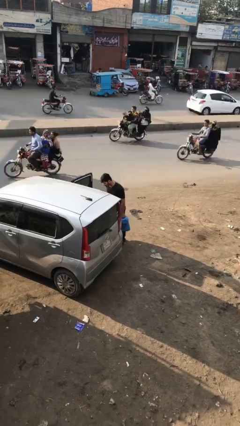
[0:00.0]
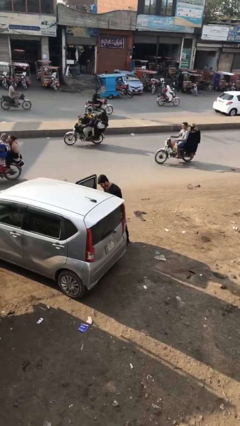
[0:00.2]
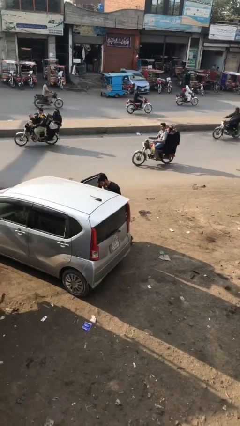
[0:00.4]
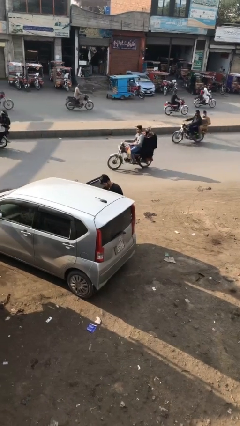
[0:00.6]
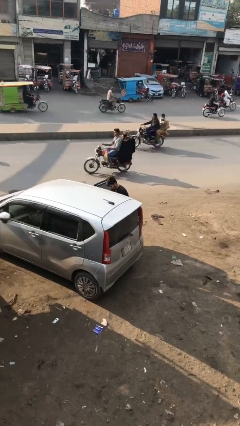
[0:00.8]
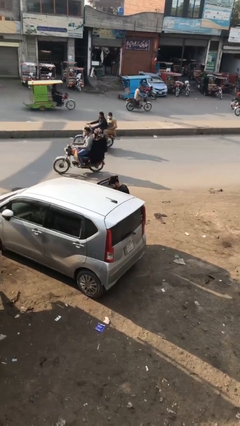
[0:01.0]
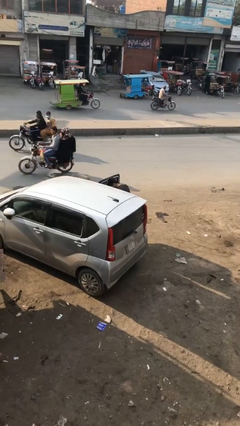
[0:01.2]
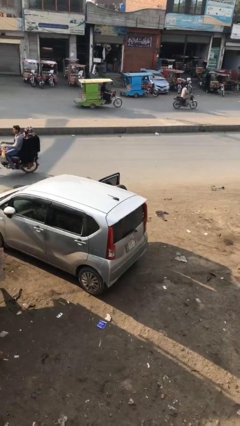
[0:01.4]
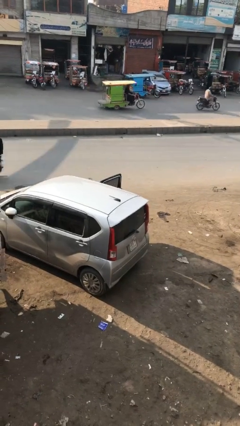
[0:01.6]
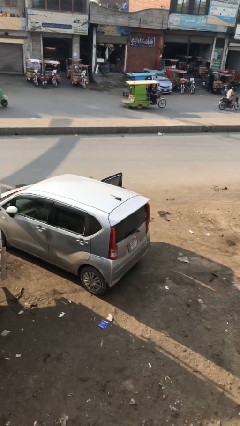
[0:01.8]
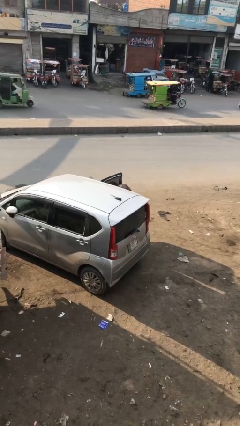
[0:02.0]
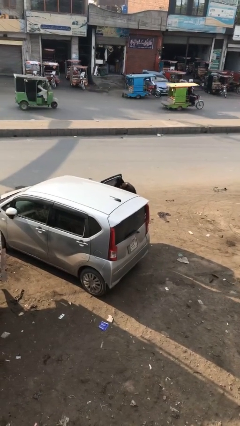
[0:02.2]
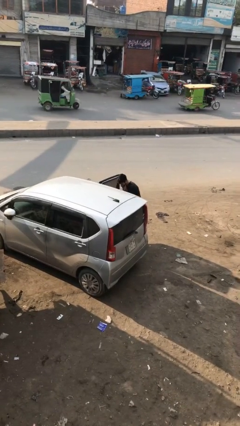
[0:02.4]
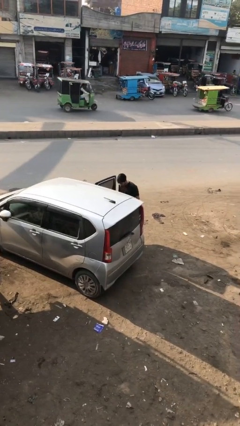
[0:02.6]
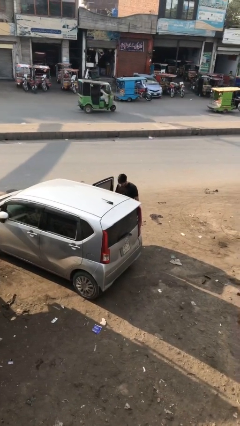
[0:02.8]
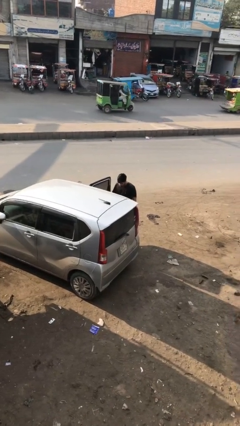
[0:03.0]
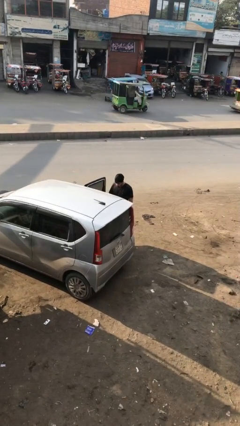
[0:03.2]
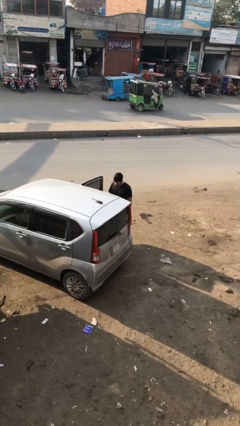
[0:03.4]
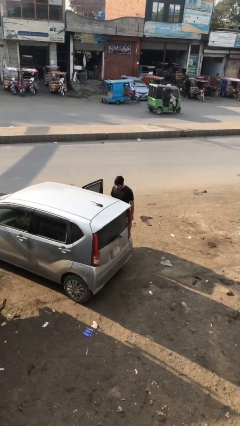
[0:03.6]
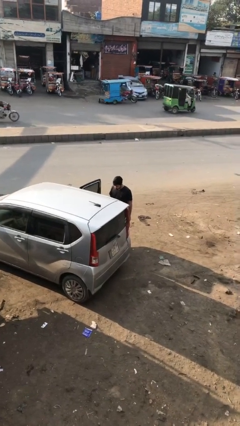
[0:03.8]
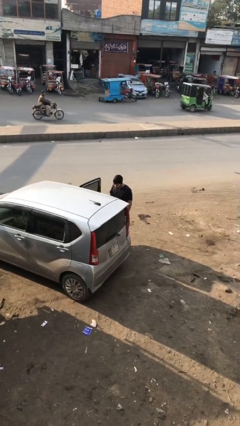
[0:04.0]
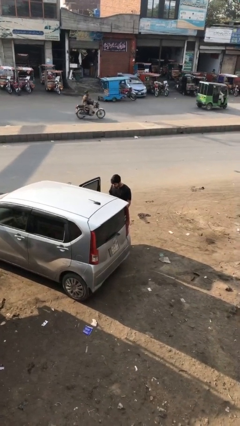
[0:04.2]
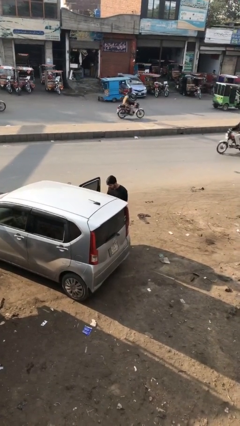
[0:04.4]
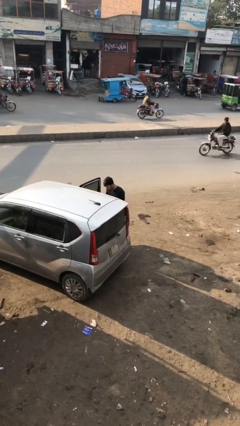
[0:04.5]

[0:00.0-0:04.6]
person loads car

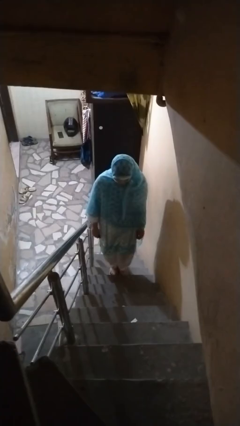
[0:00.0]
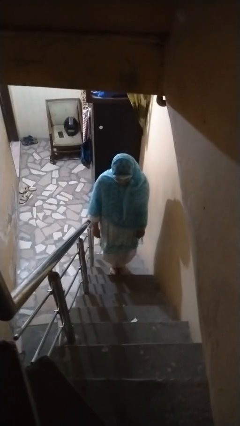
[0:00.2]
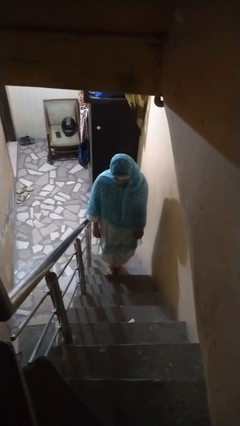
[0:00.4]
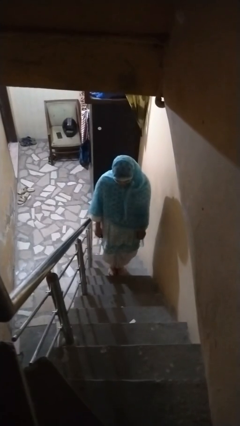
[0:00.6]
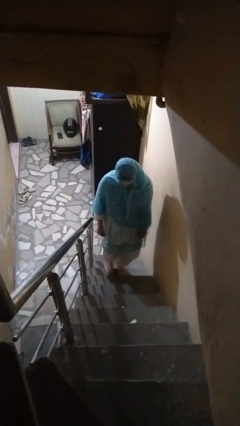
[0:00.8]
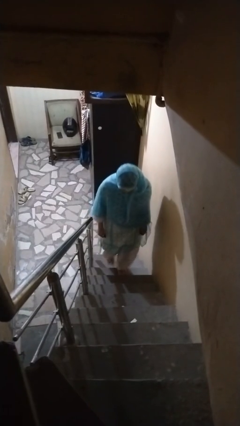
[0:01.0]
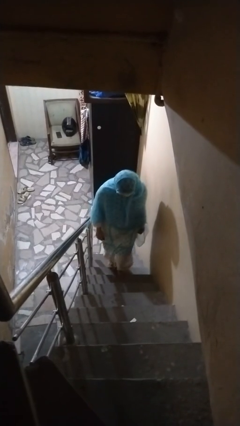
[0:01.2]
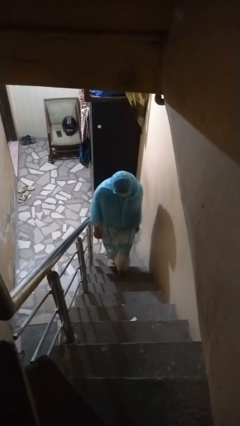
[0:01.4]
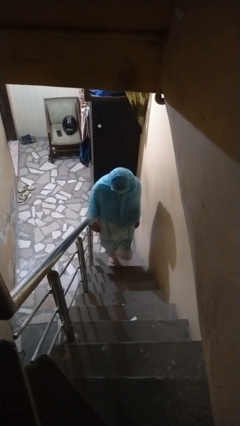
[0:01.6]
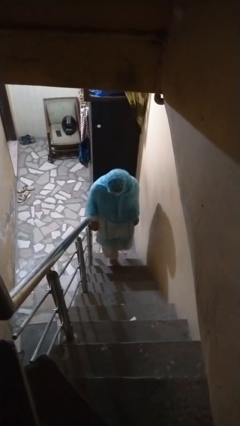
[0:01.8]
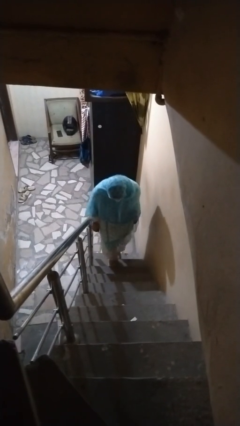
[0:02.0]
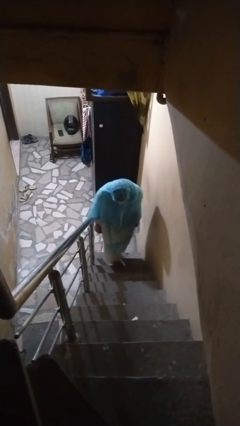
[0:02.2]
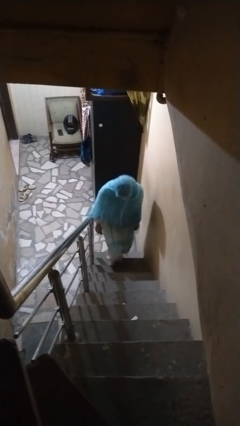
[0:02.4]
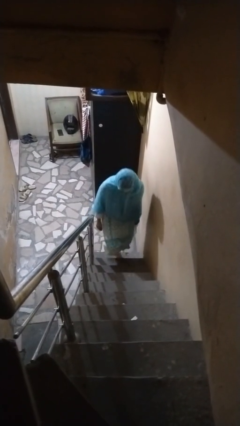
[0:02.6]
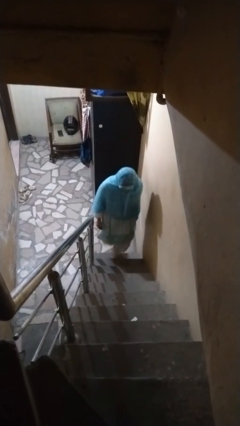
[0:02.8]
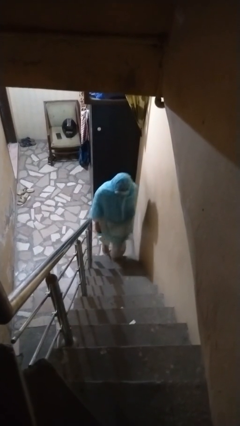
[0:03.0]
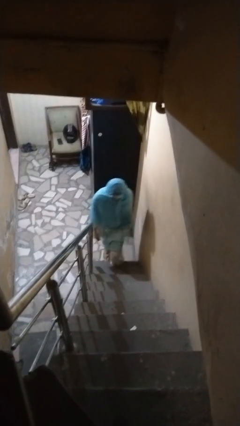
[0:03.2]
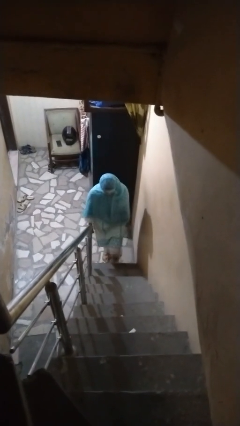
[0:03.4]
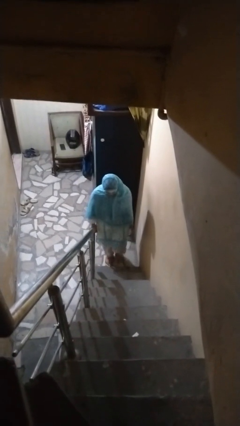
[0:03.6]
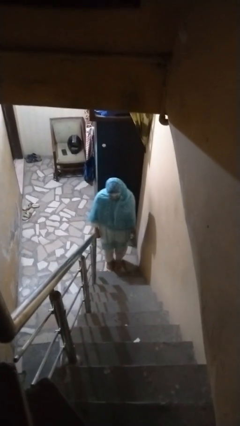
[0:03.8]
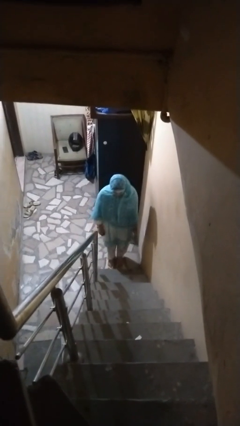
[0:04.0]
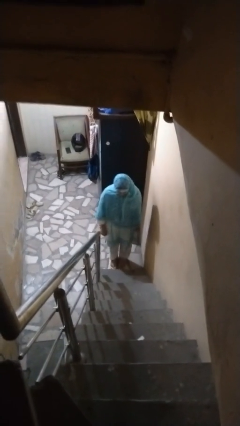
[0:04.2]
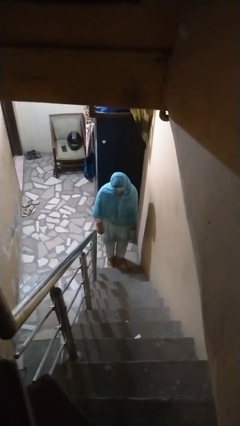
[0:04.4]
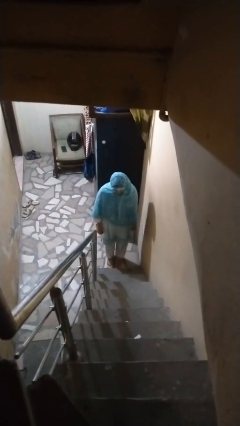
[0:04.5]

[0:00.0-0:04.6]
person climbs down stairs

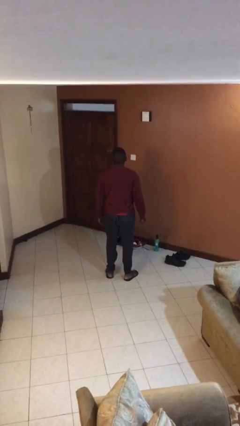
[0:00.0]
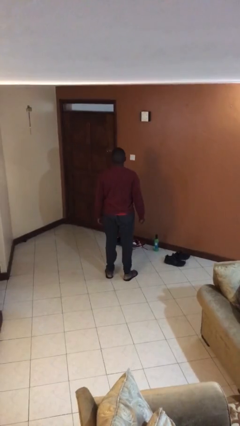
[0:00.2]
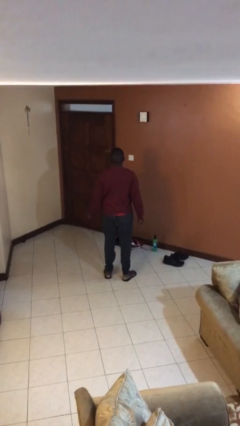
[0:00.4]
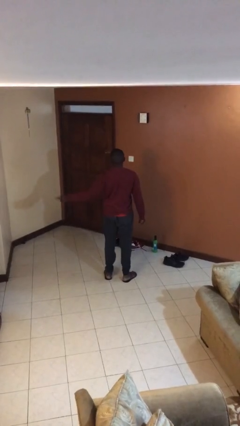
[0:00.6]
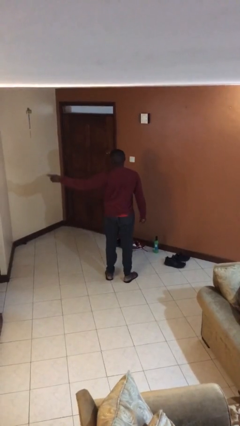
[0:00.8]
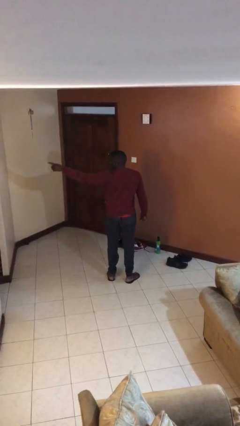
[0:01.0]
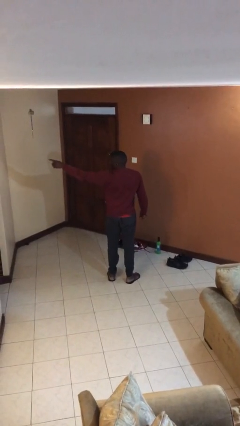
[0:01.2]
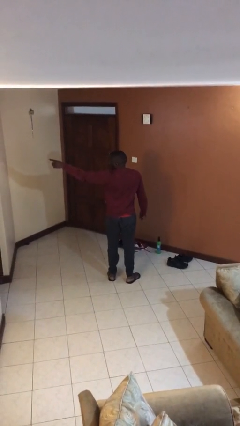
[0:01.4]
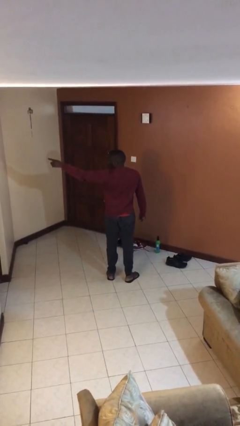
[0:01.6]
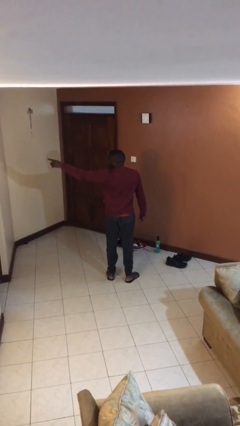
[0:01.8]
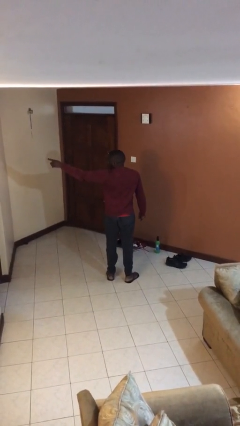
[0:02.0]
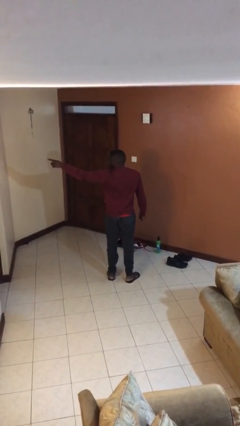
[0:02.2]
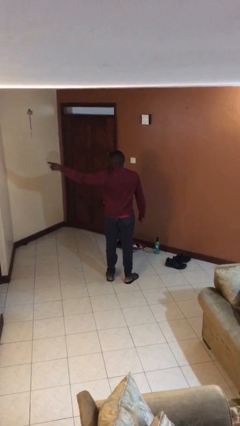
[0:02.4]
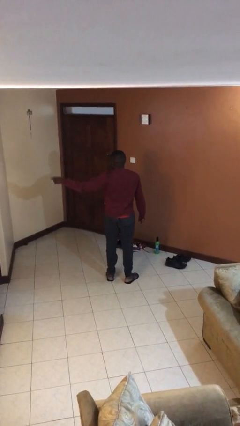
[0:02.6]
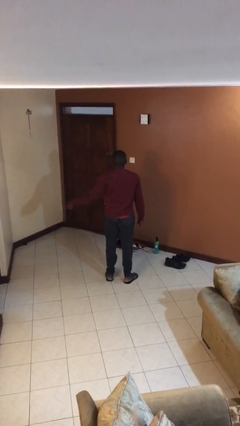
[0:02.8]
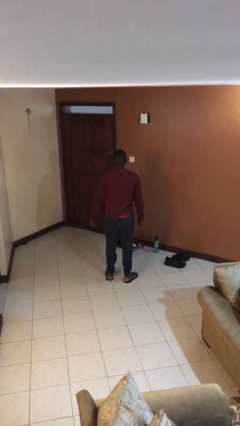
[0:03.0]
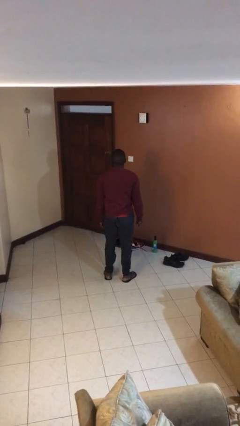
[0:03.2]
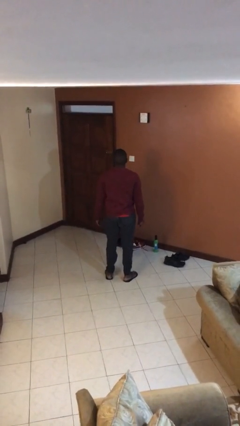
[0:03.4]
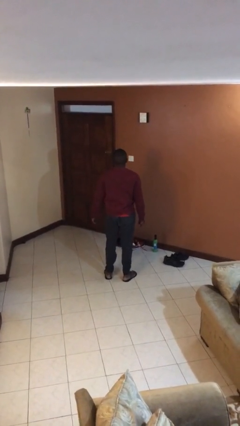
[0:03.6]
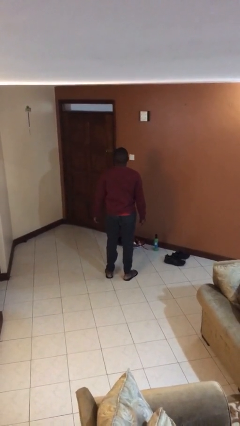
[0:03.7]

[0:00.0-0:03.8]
person points at person

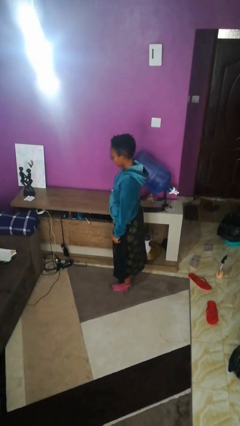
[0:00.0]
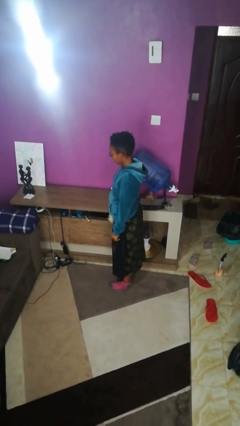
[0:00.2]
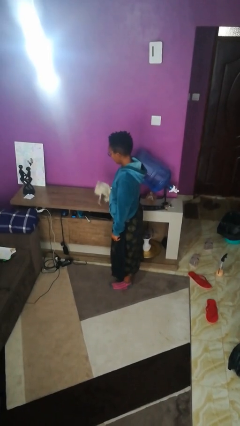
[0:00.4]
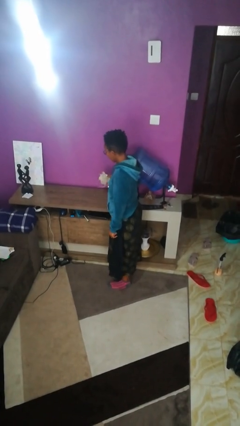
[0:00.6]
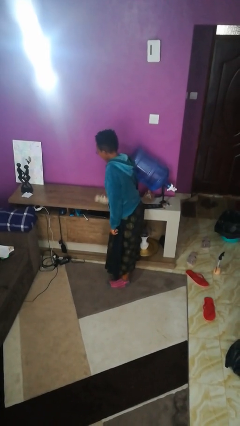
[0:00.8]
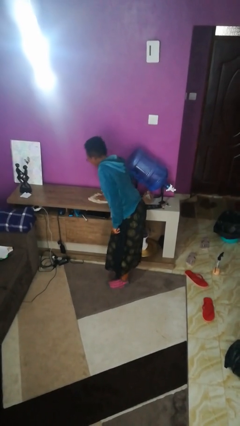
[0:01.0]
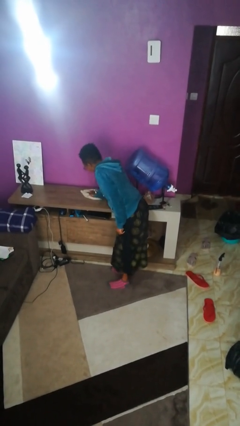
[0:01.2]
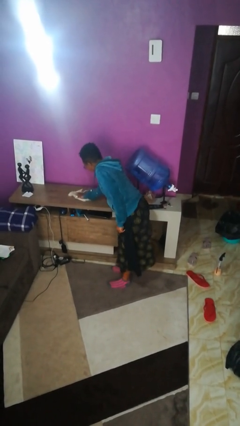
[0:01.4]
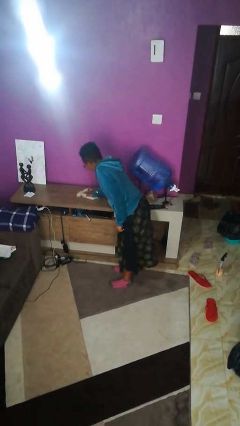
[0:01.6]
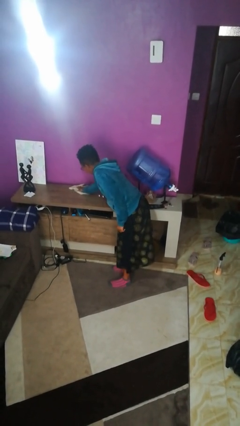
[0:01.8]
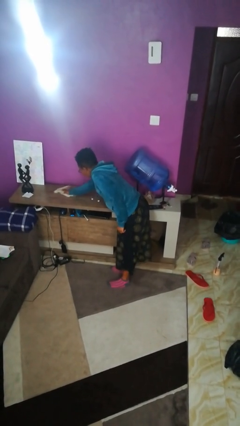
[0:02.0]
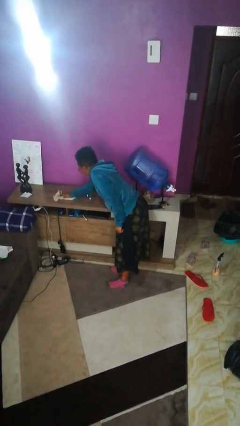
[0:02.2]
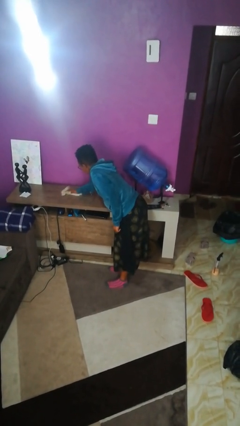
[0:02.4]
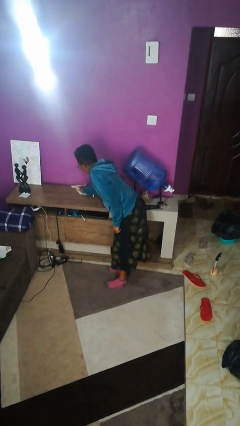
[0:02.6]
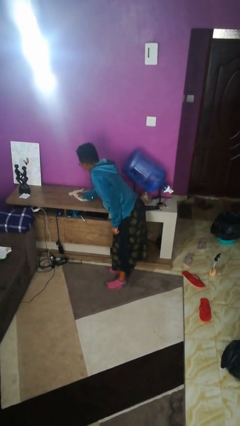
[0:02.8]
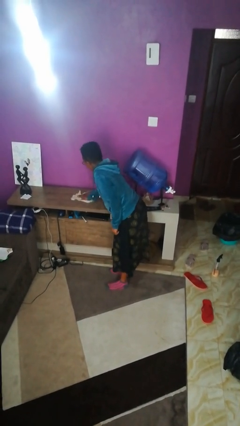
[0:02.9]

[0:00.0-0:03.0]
person cleans table with rag

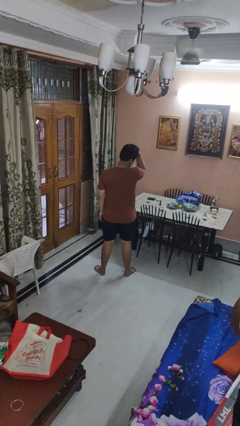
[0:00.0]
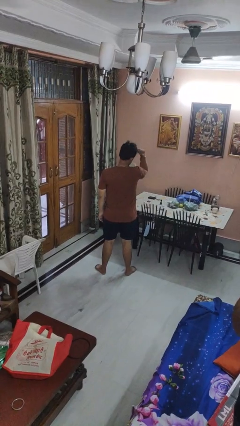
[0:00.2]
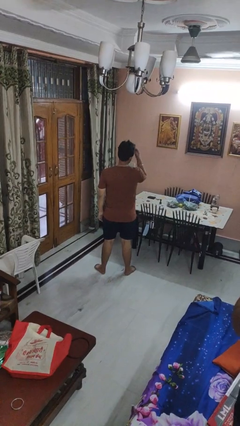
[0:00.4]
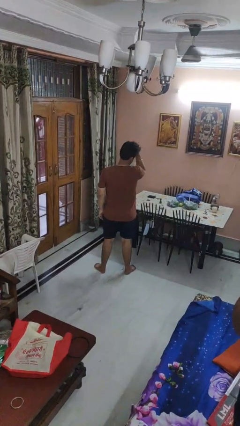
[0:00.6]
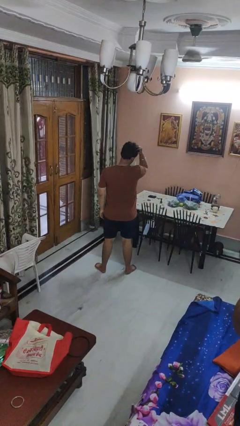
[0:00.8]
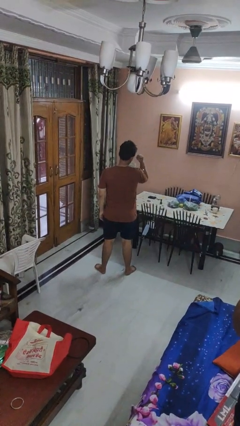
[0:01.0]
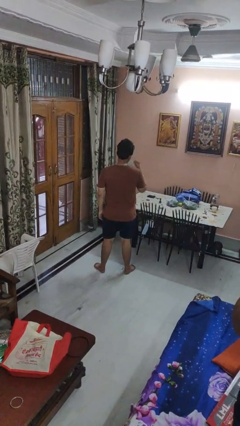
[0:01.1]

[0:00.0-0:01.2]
person strokes hair

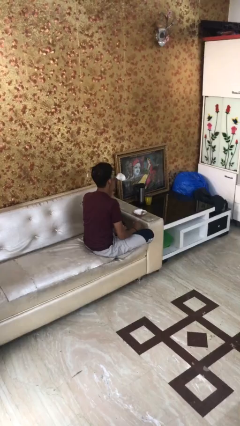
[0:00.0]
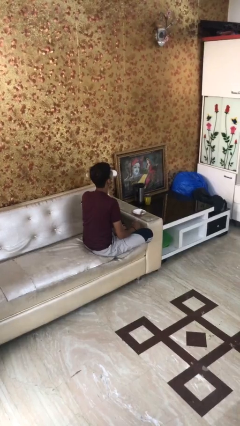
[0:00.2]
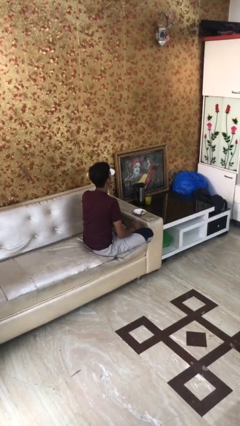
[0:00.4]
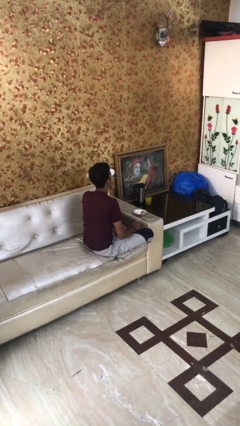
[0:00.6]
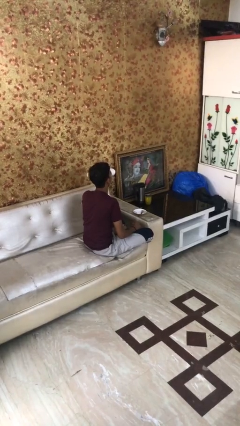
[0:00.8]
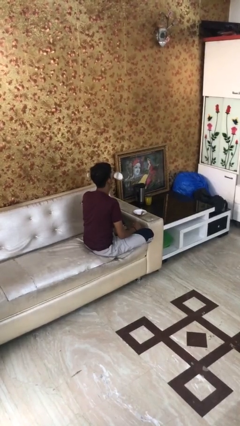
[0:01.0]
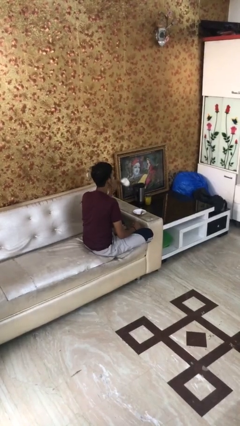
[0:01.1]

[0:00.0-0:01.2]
person drinks from mug
